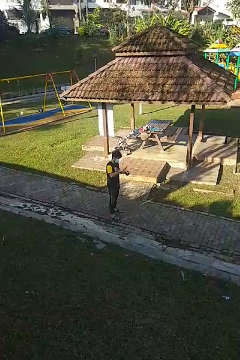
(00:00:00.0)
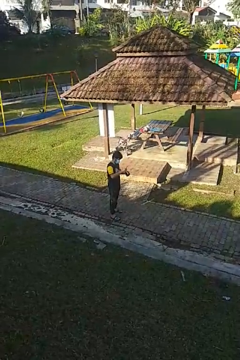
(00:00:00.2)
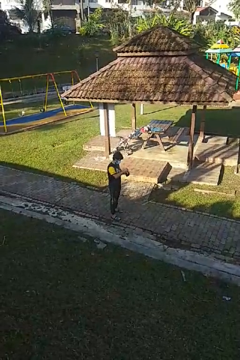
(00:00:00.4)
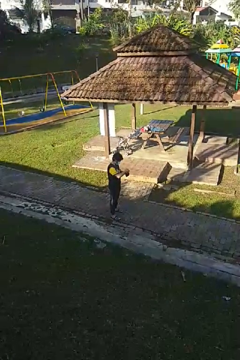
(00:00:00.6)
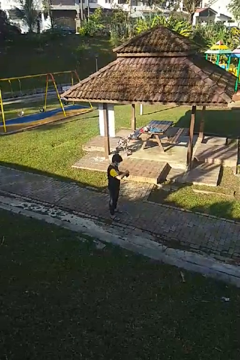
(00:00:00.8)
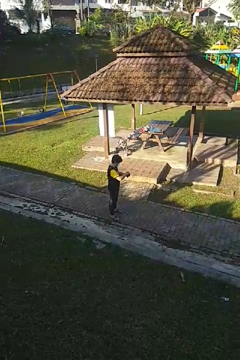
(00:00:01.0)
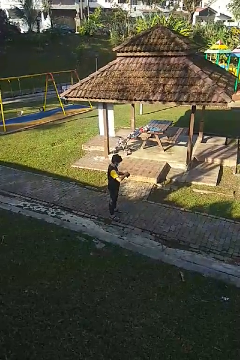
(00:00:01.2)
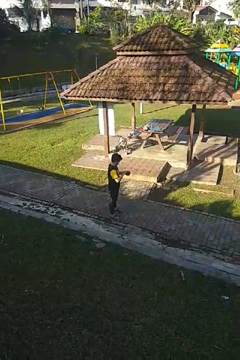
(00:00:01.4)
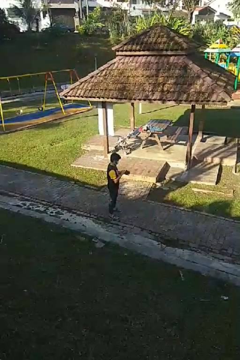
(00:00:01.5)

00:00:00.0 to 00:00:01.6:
person puts object into purse

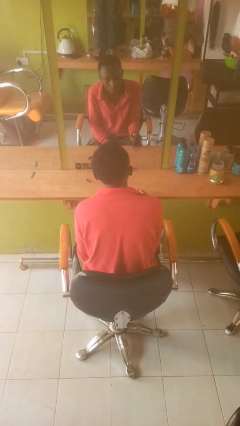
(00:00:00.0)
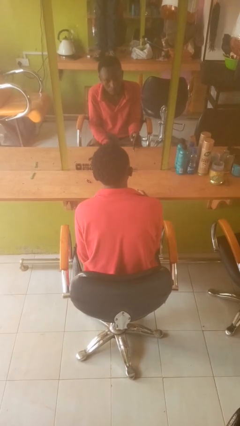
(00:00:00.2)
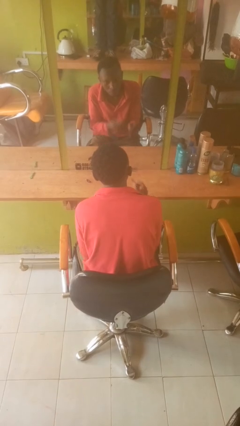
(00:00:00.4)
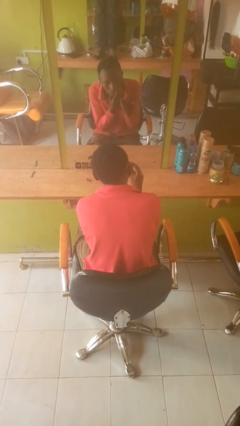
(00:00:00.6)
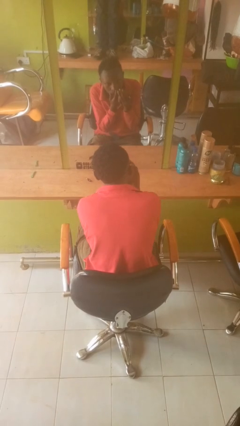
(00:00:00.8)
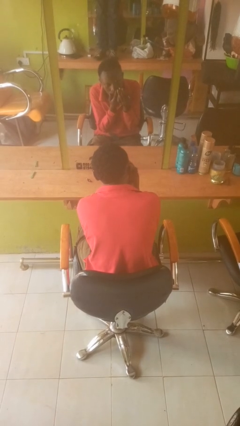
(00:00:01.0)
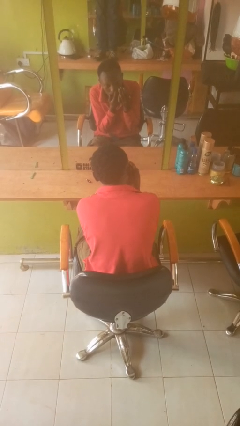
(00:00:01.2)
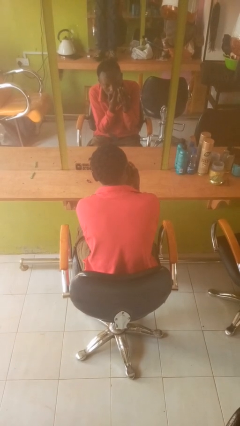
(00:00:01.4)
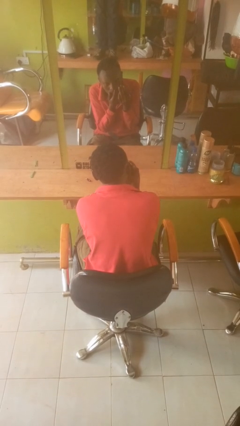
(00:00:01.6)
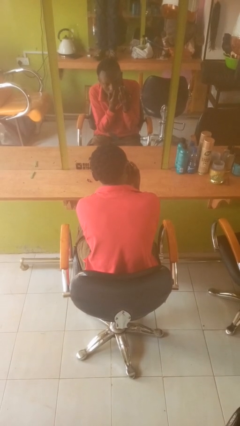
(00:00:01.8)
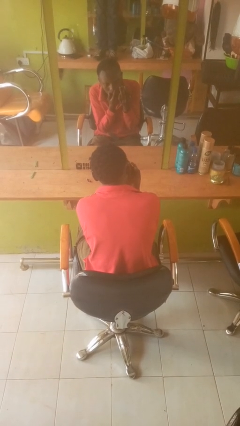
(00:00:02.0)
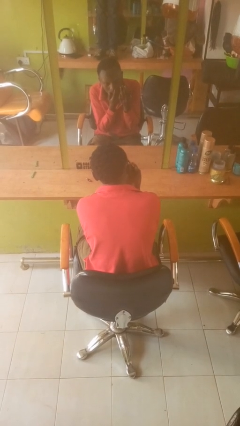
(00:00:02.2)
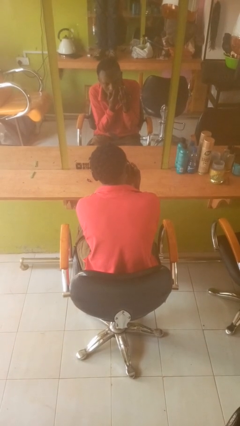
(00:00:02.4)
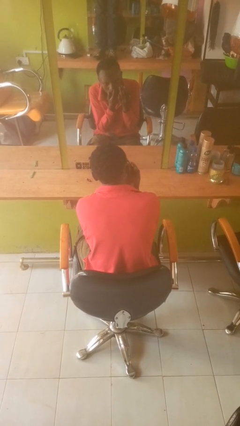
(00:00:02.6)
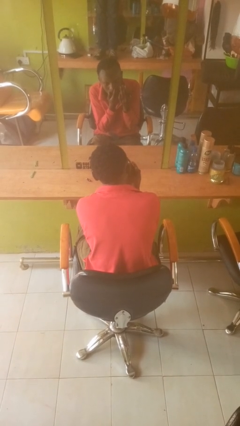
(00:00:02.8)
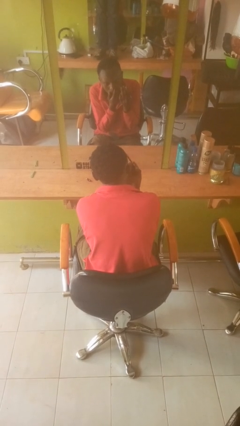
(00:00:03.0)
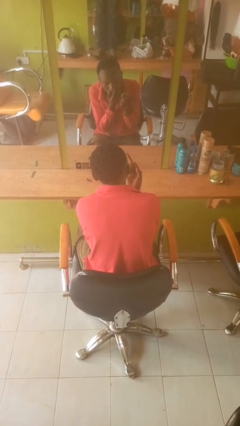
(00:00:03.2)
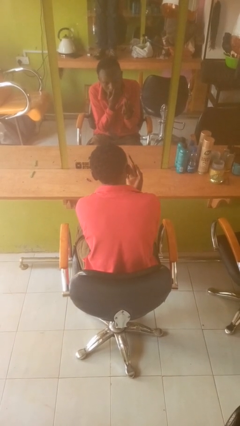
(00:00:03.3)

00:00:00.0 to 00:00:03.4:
person applies eye makeup

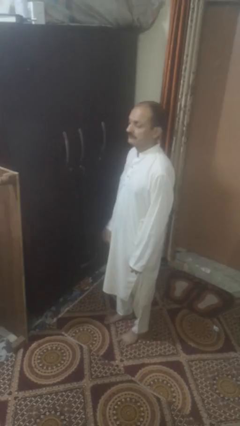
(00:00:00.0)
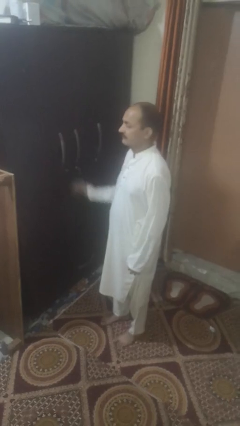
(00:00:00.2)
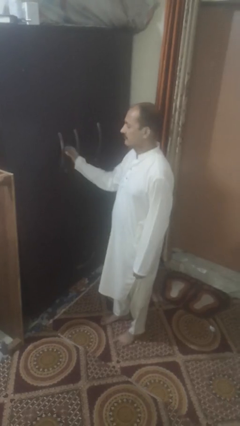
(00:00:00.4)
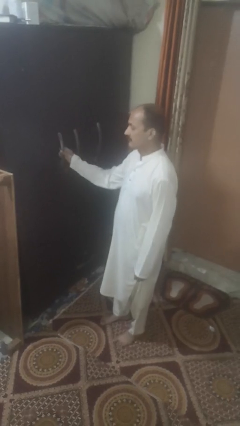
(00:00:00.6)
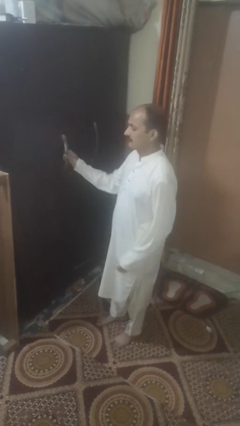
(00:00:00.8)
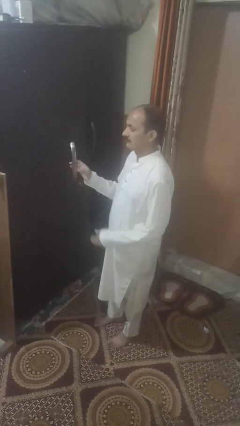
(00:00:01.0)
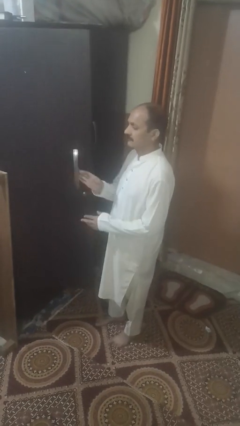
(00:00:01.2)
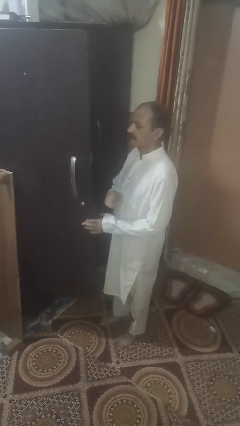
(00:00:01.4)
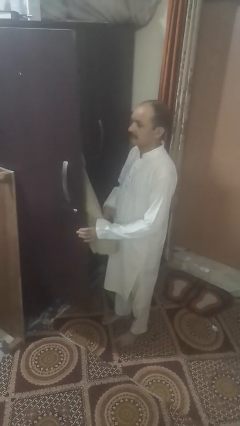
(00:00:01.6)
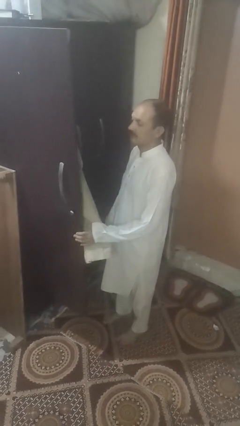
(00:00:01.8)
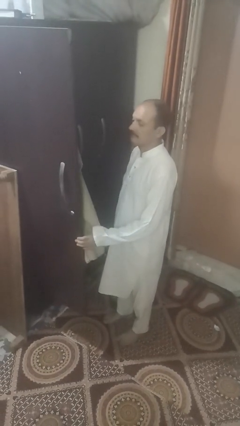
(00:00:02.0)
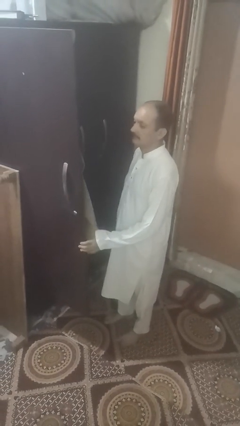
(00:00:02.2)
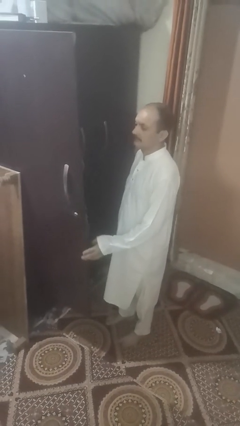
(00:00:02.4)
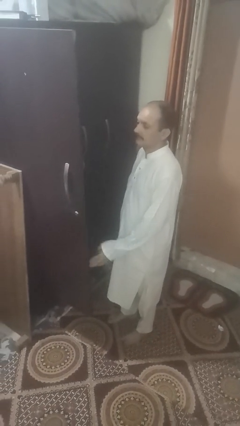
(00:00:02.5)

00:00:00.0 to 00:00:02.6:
person opens facility door

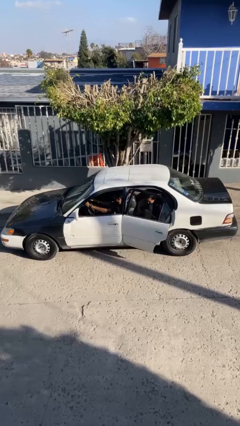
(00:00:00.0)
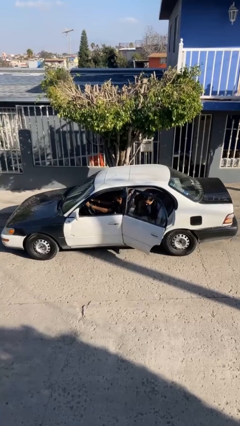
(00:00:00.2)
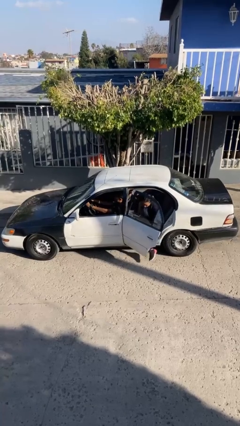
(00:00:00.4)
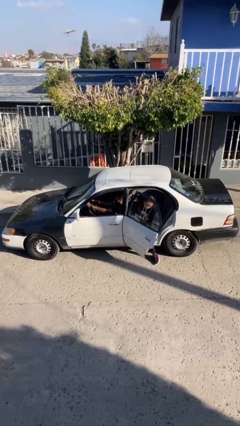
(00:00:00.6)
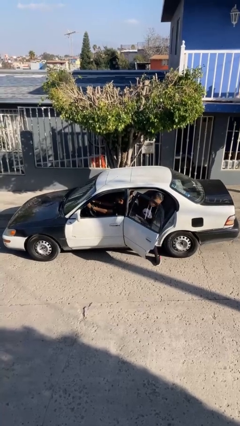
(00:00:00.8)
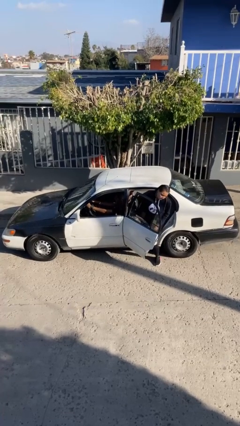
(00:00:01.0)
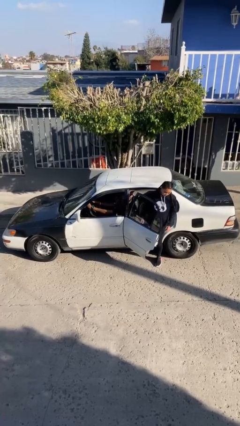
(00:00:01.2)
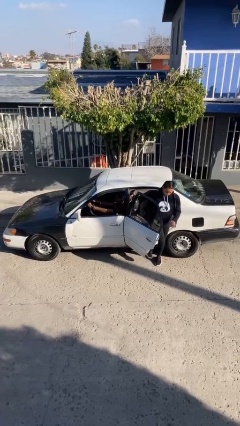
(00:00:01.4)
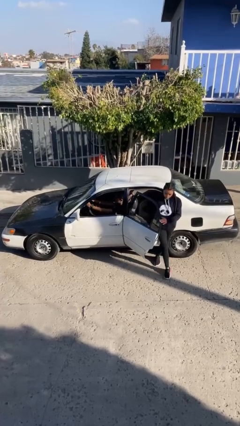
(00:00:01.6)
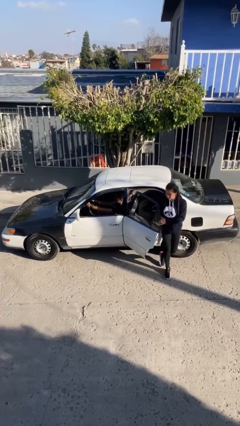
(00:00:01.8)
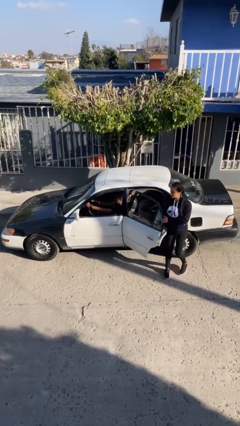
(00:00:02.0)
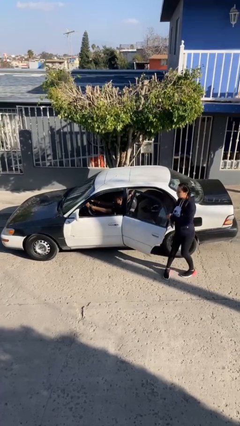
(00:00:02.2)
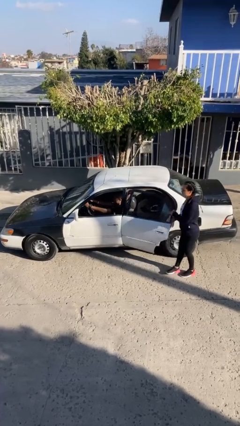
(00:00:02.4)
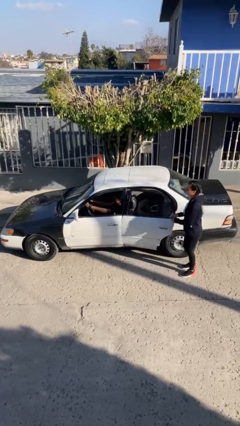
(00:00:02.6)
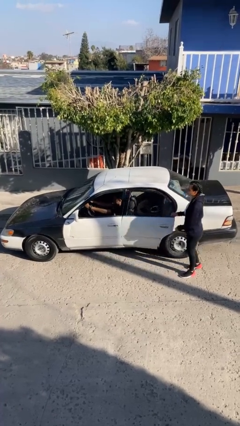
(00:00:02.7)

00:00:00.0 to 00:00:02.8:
car drops off person

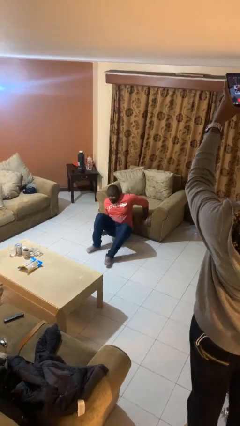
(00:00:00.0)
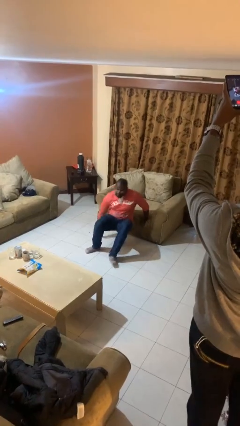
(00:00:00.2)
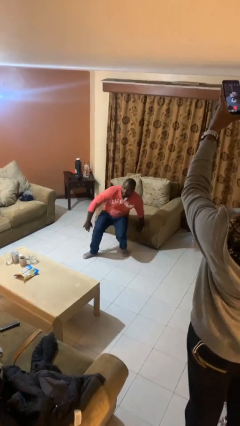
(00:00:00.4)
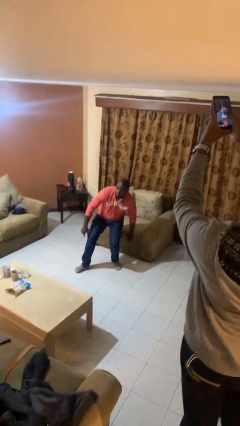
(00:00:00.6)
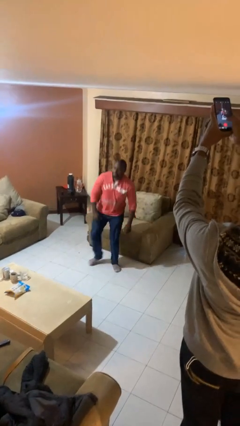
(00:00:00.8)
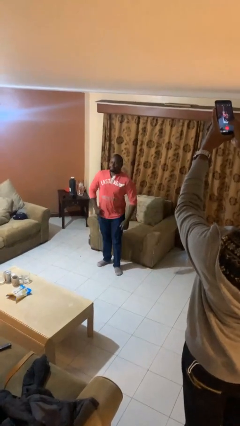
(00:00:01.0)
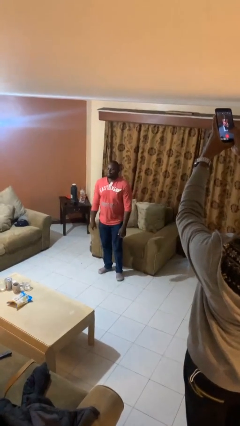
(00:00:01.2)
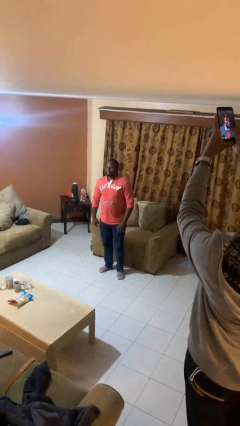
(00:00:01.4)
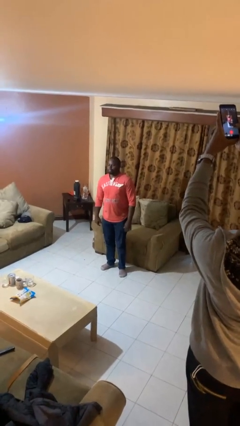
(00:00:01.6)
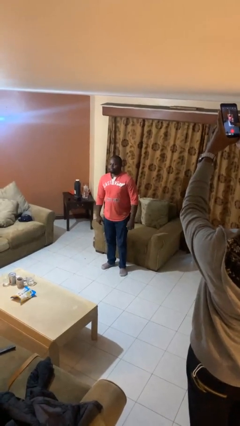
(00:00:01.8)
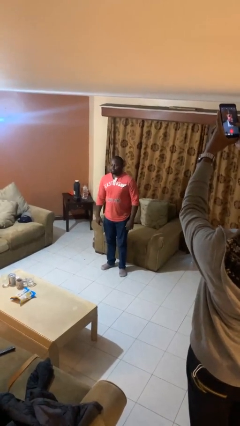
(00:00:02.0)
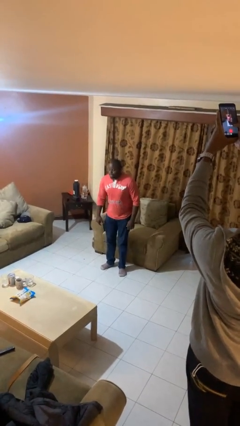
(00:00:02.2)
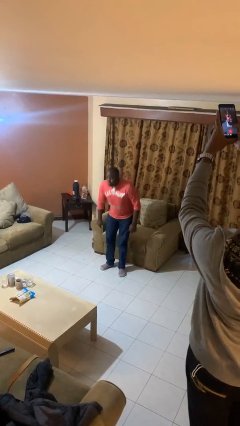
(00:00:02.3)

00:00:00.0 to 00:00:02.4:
person stands up from floor

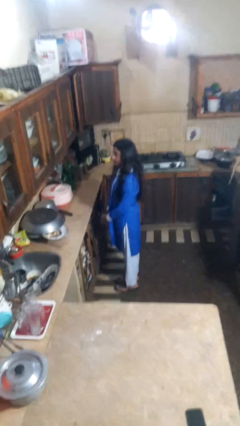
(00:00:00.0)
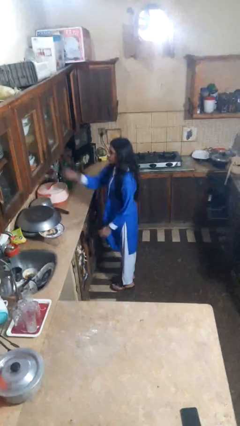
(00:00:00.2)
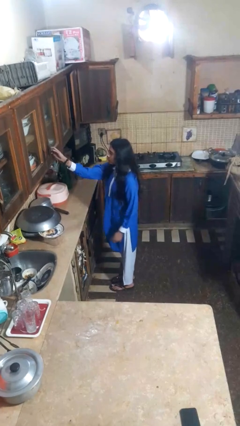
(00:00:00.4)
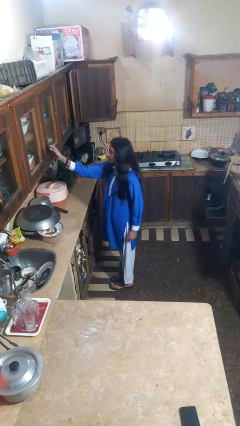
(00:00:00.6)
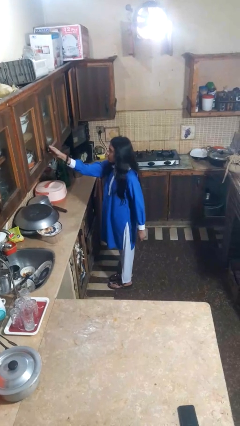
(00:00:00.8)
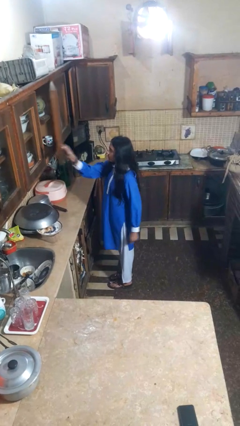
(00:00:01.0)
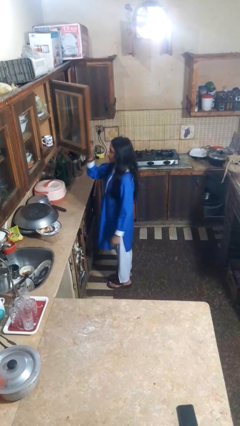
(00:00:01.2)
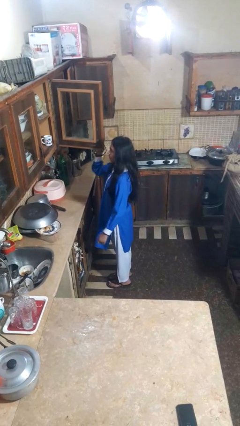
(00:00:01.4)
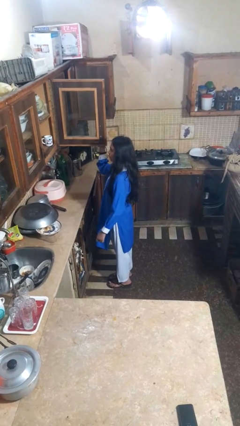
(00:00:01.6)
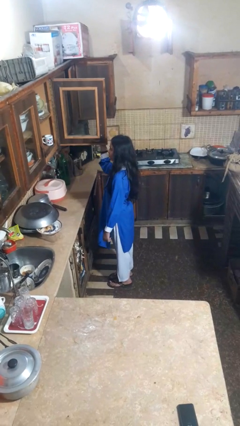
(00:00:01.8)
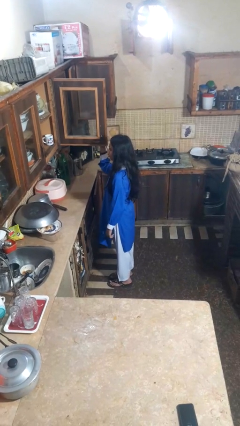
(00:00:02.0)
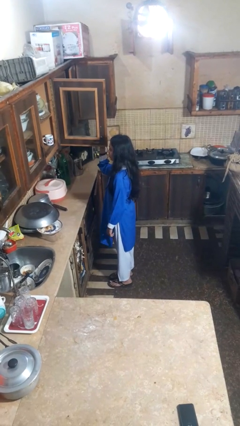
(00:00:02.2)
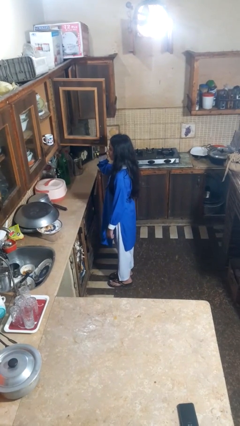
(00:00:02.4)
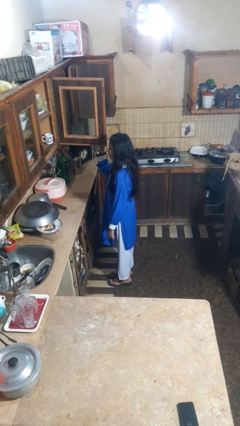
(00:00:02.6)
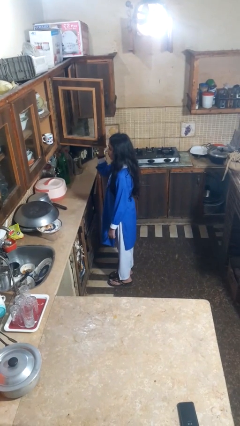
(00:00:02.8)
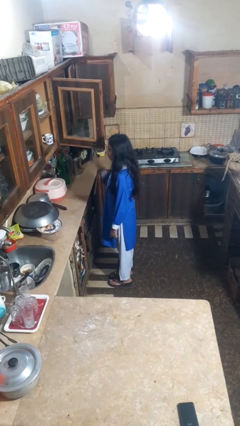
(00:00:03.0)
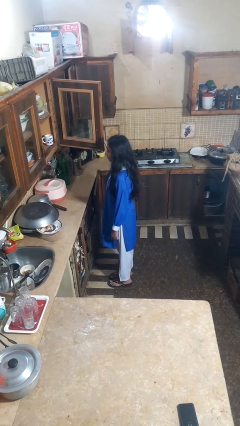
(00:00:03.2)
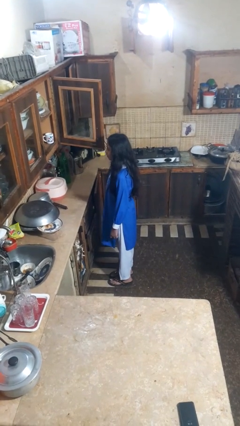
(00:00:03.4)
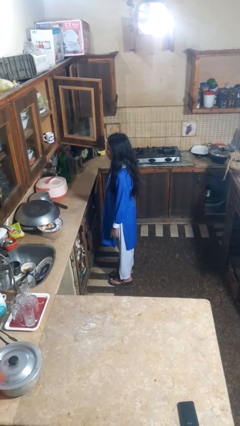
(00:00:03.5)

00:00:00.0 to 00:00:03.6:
person opens cabinet

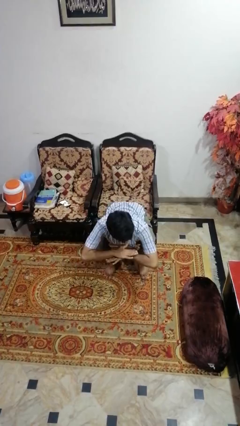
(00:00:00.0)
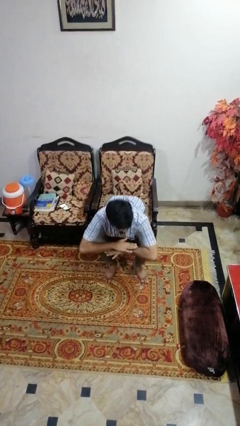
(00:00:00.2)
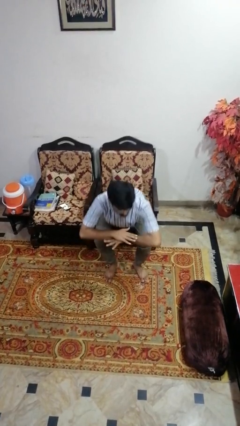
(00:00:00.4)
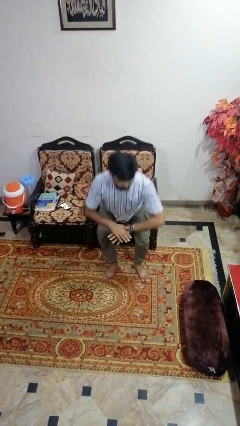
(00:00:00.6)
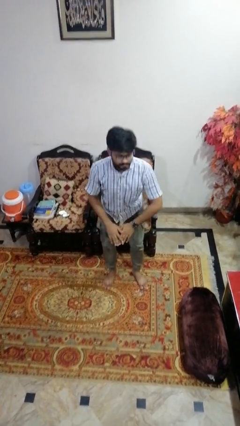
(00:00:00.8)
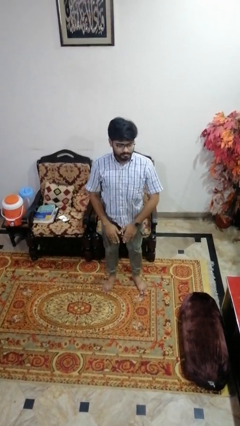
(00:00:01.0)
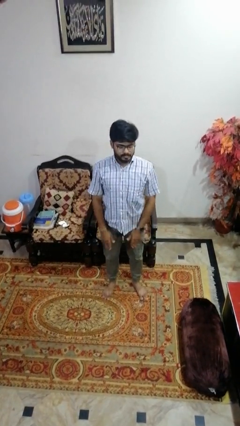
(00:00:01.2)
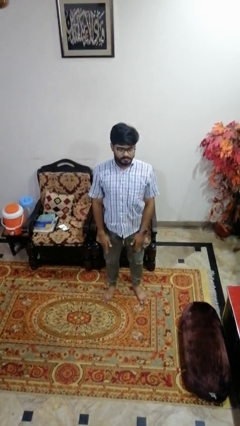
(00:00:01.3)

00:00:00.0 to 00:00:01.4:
person stands up
